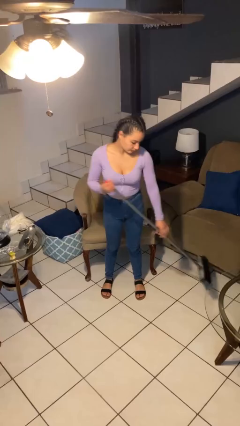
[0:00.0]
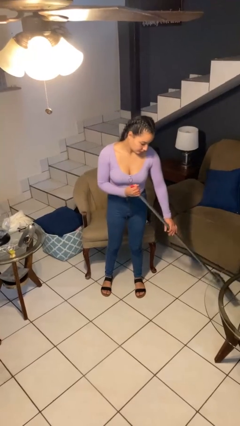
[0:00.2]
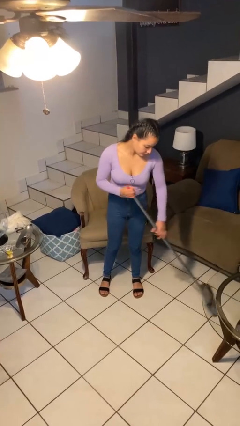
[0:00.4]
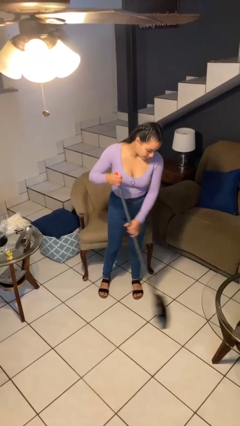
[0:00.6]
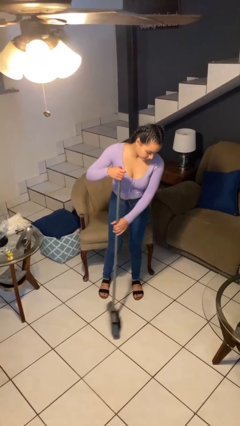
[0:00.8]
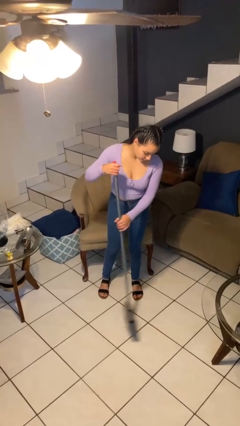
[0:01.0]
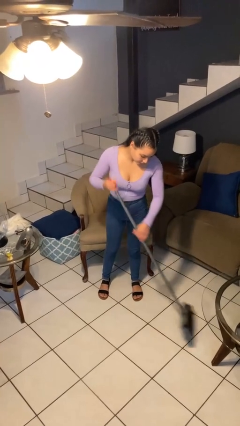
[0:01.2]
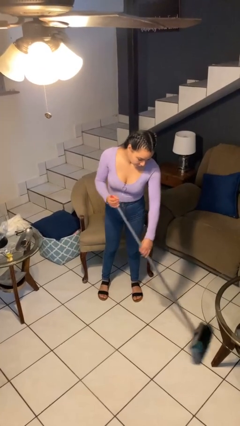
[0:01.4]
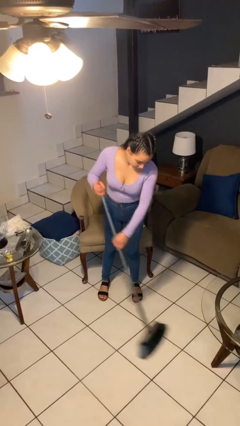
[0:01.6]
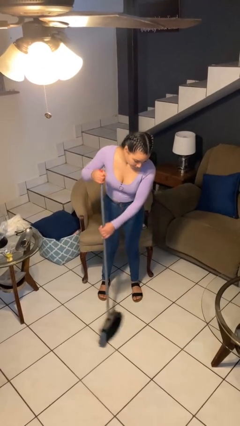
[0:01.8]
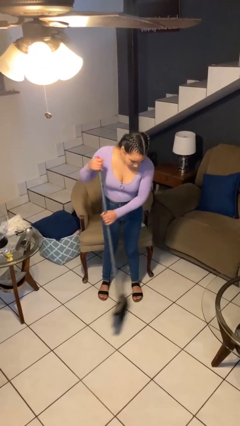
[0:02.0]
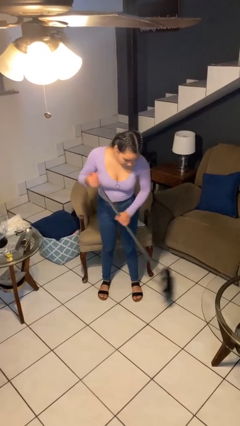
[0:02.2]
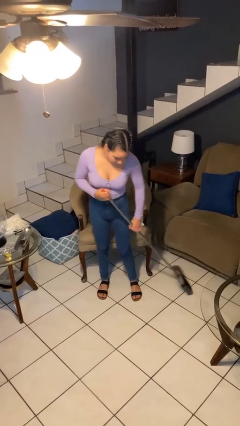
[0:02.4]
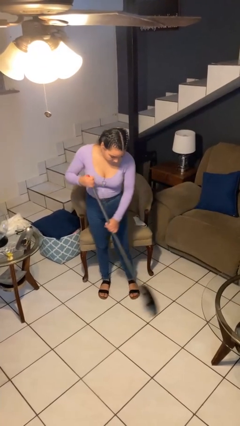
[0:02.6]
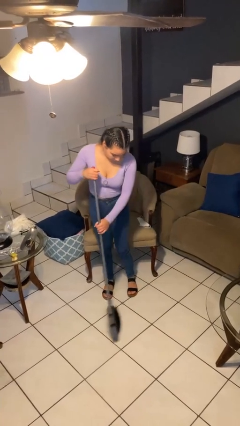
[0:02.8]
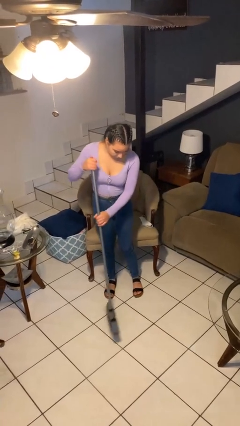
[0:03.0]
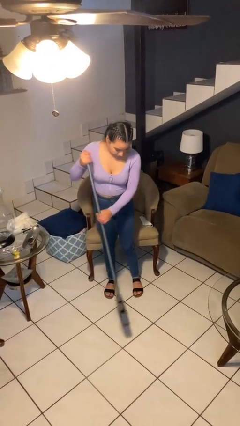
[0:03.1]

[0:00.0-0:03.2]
person sweeps floor

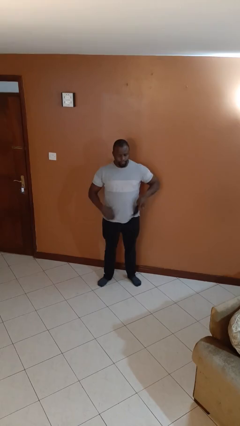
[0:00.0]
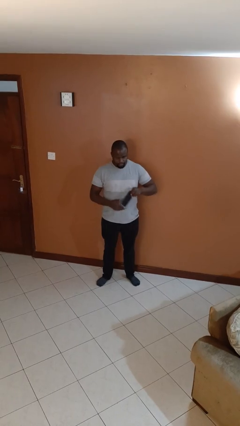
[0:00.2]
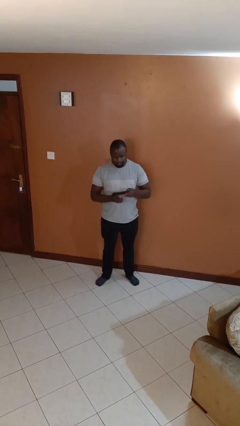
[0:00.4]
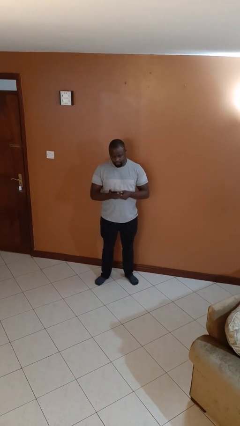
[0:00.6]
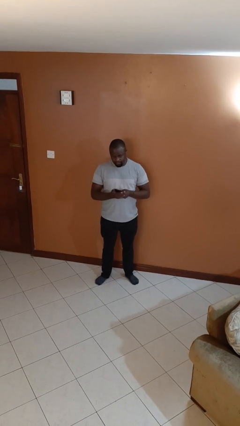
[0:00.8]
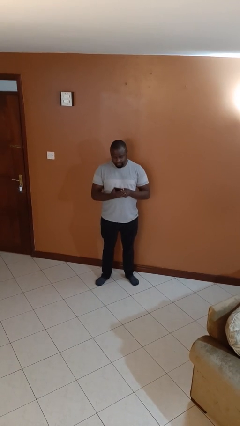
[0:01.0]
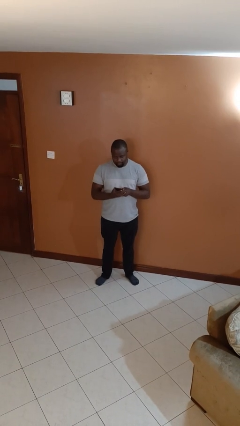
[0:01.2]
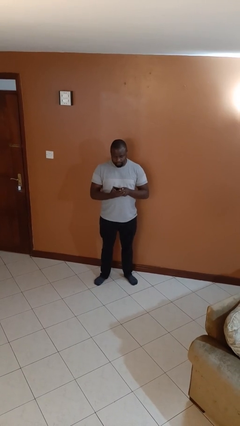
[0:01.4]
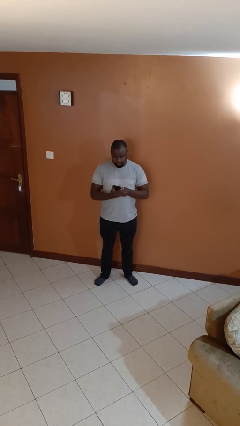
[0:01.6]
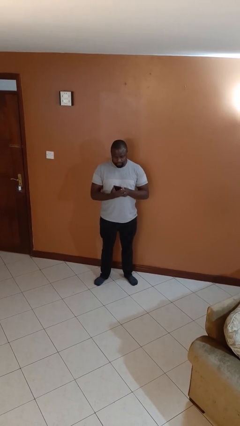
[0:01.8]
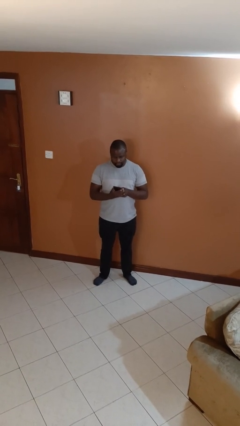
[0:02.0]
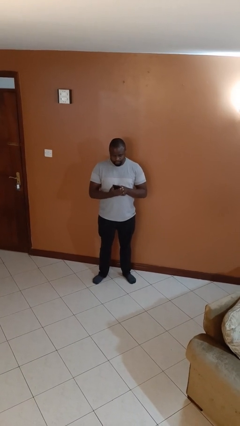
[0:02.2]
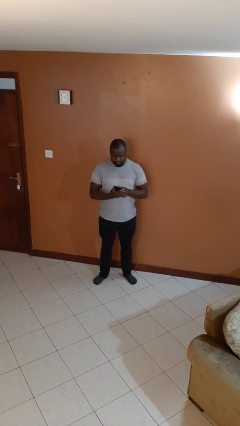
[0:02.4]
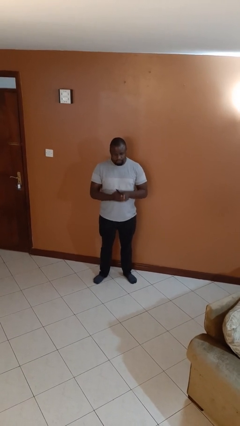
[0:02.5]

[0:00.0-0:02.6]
person takes phone from pocket

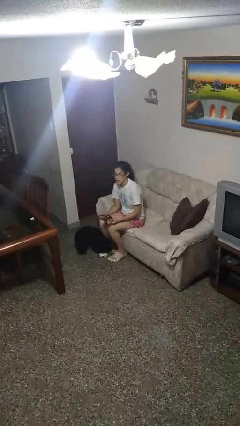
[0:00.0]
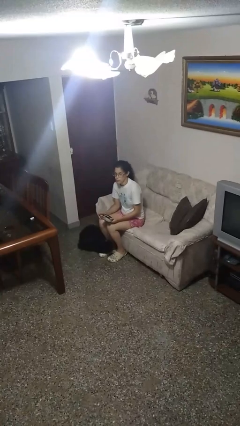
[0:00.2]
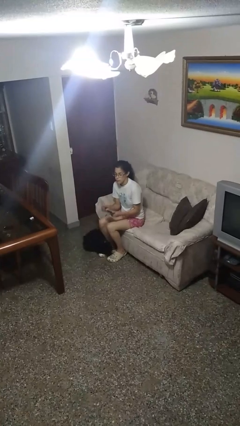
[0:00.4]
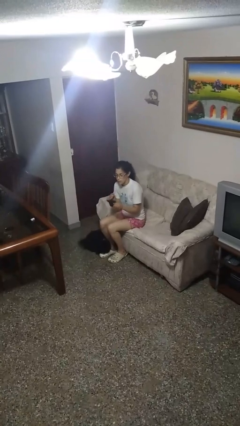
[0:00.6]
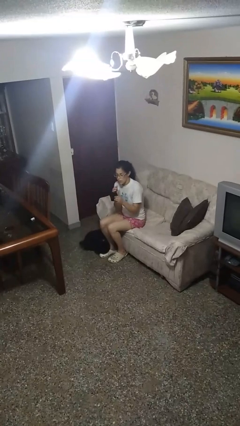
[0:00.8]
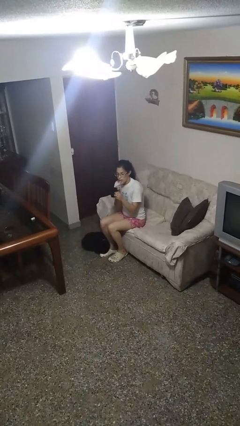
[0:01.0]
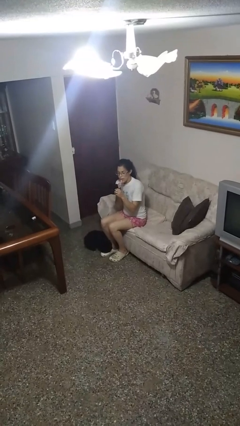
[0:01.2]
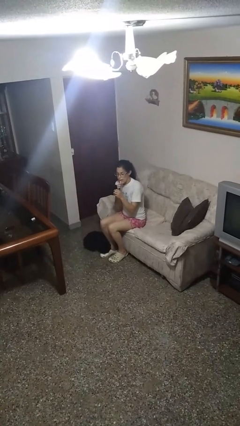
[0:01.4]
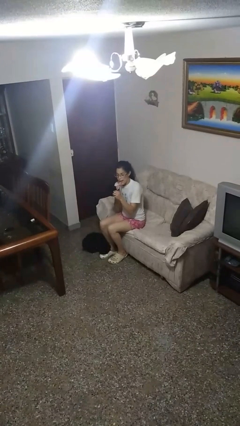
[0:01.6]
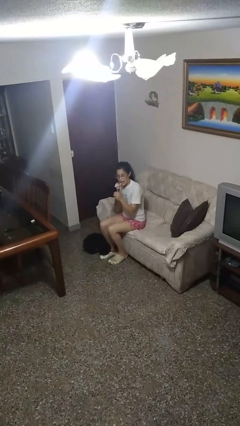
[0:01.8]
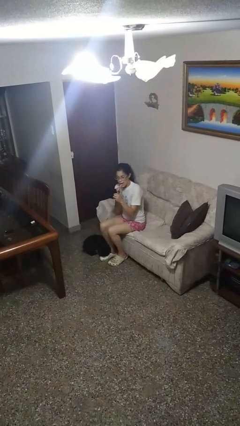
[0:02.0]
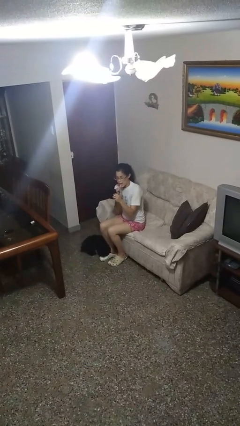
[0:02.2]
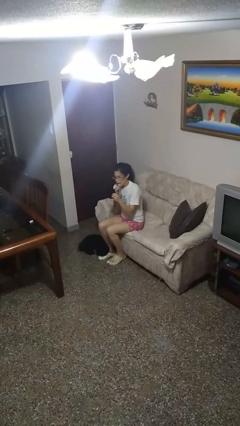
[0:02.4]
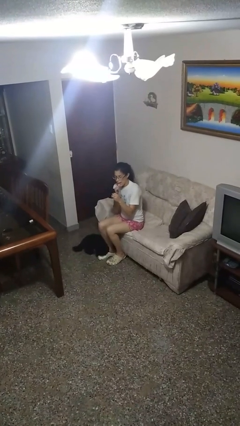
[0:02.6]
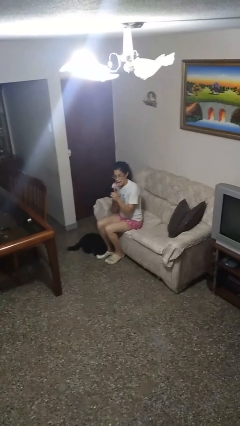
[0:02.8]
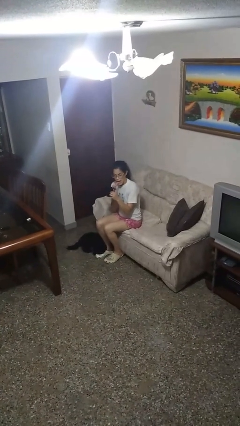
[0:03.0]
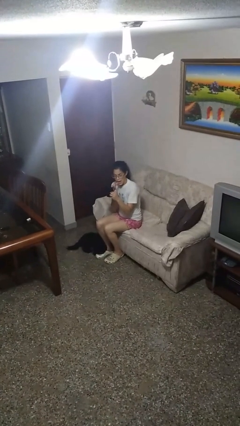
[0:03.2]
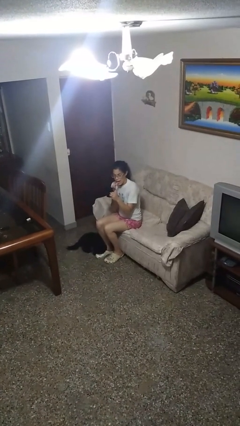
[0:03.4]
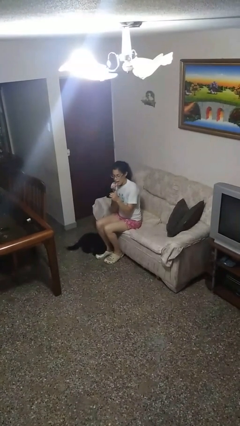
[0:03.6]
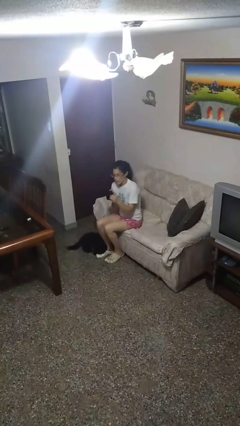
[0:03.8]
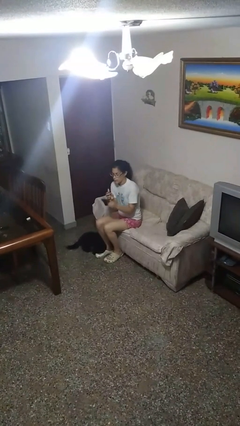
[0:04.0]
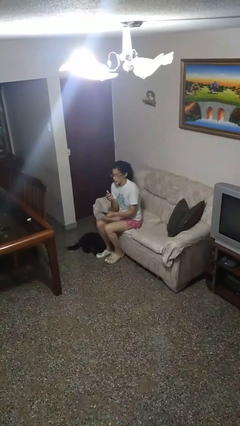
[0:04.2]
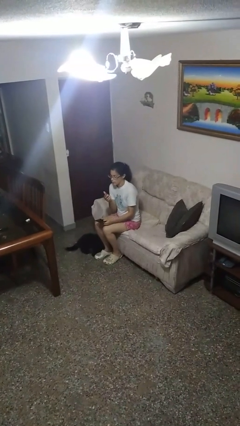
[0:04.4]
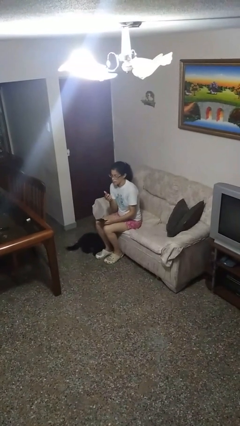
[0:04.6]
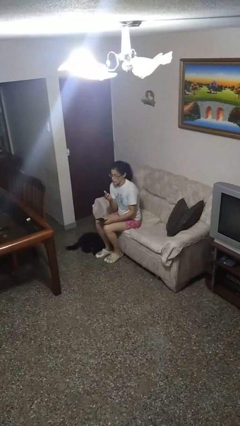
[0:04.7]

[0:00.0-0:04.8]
person applies lip makeup

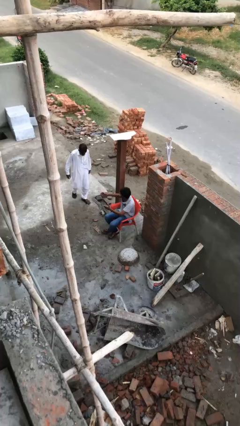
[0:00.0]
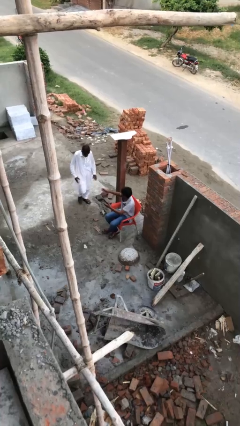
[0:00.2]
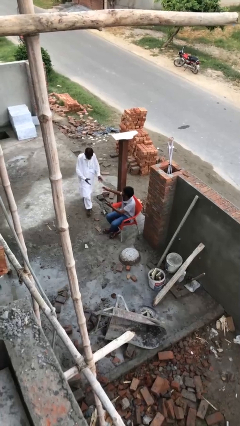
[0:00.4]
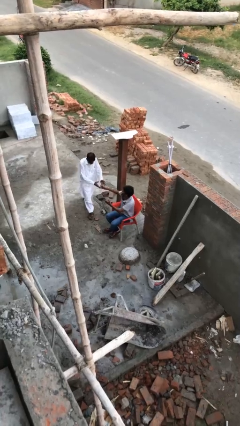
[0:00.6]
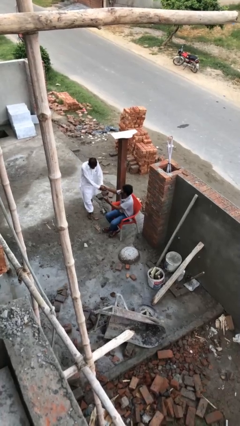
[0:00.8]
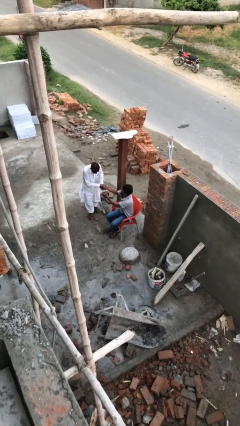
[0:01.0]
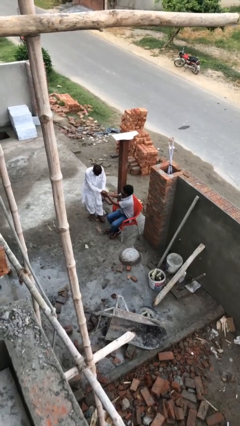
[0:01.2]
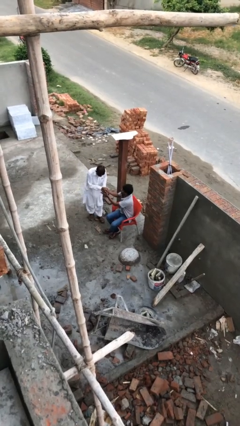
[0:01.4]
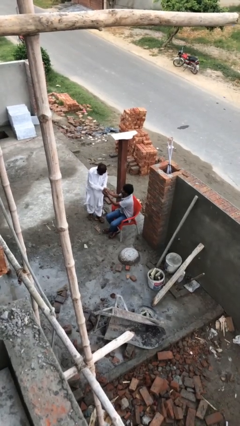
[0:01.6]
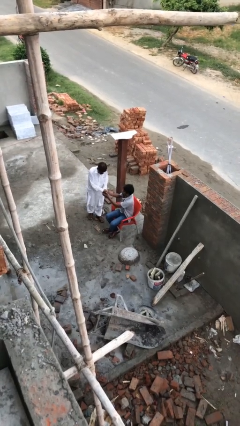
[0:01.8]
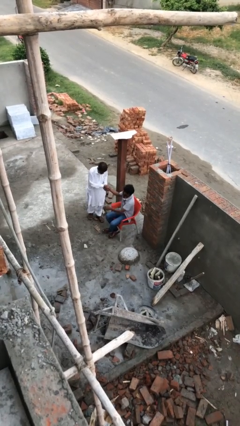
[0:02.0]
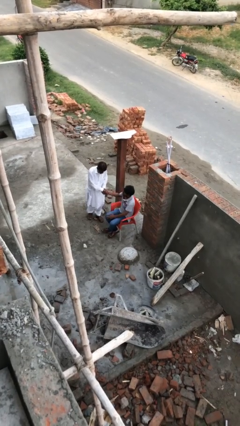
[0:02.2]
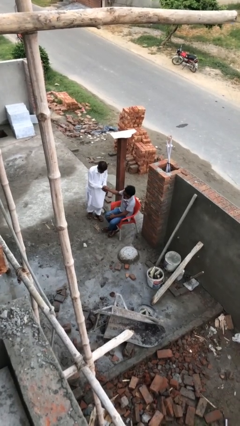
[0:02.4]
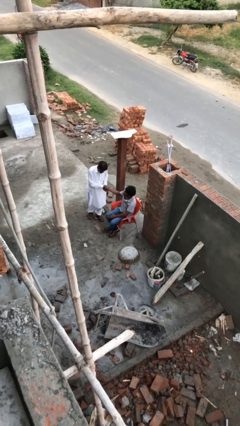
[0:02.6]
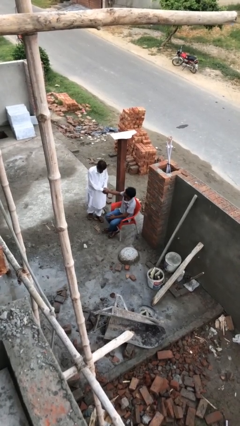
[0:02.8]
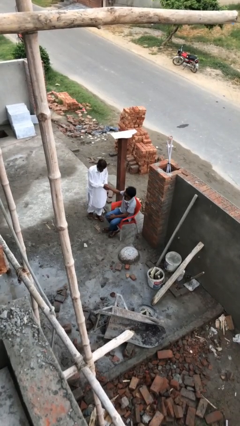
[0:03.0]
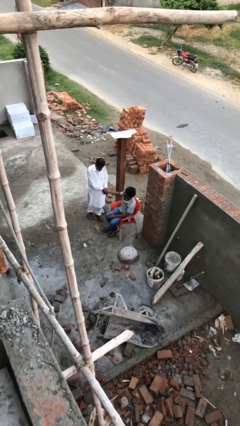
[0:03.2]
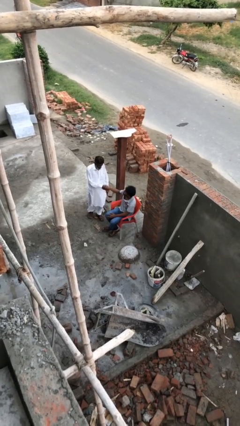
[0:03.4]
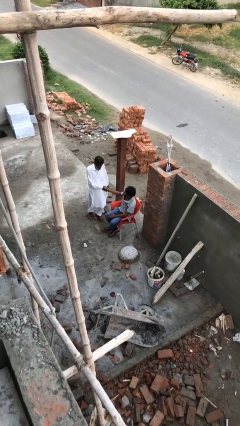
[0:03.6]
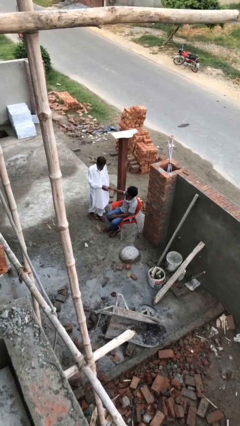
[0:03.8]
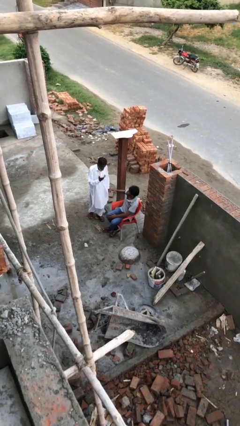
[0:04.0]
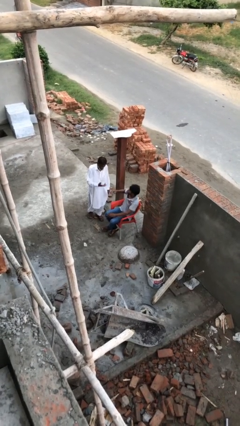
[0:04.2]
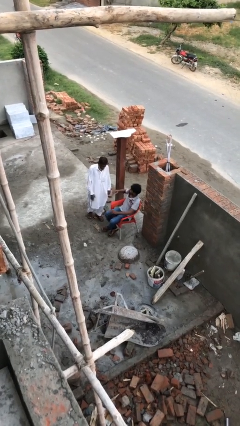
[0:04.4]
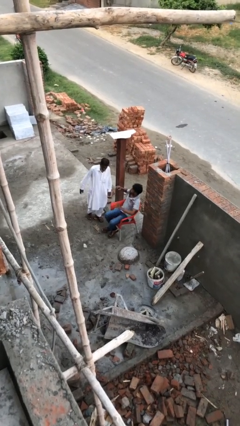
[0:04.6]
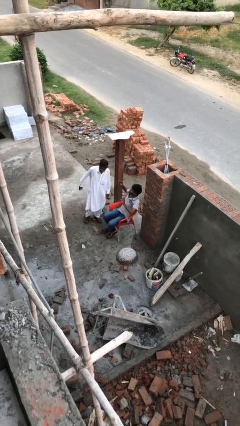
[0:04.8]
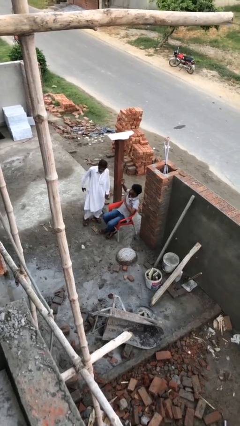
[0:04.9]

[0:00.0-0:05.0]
person shakes hand

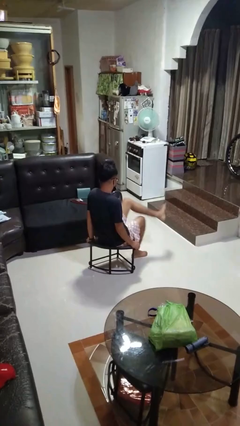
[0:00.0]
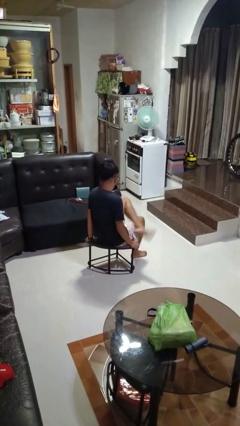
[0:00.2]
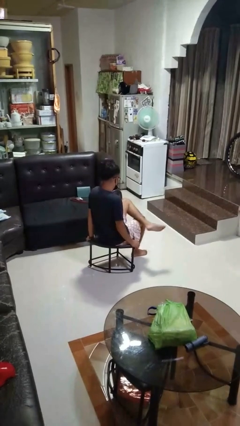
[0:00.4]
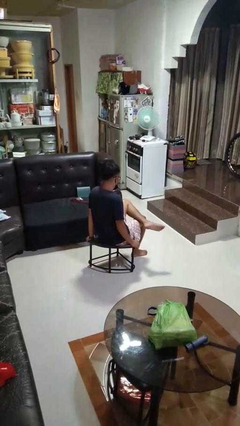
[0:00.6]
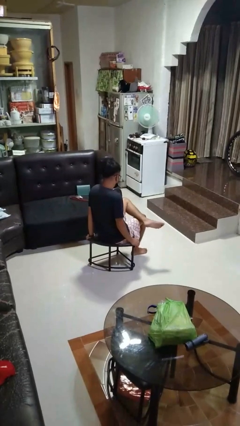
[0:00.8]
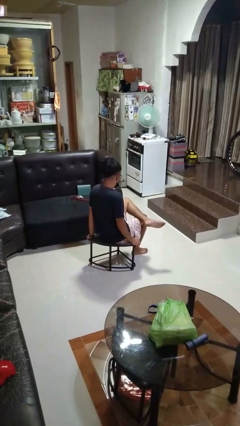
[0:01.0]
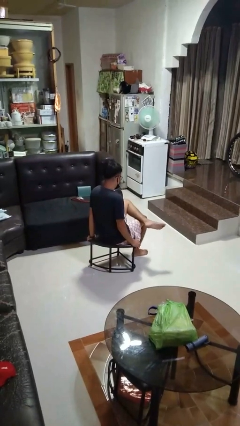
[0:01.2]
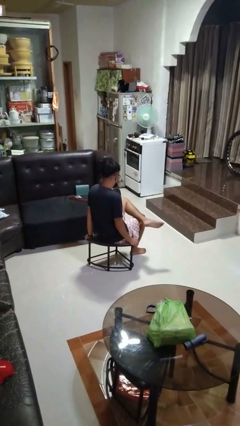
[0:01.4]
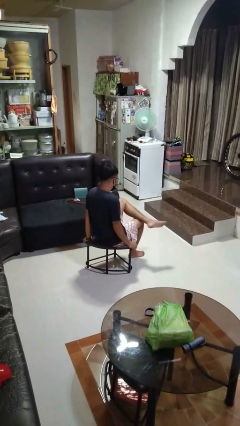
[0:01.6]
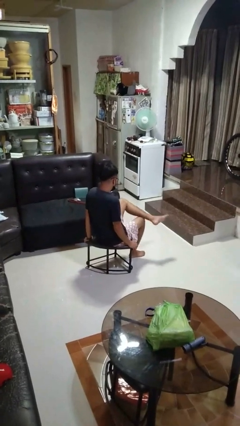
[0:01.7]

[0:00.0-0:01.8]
person crosses legs

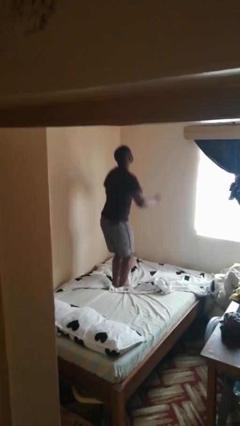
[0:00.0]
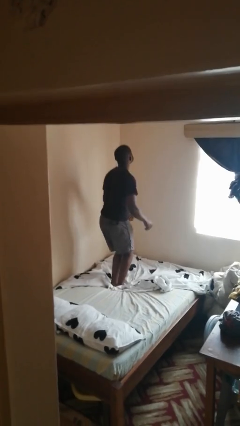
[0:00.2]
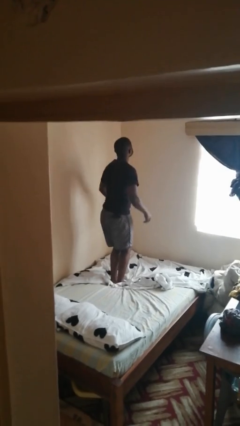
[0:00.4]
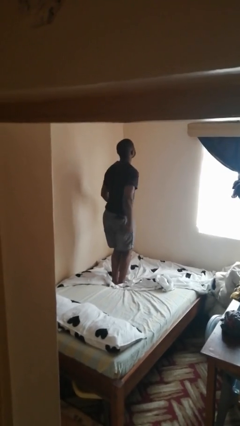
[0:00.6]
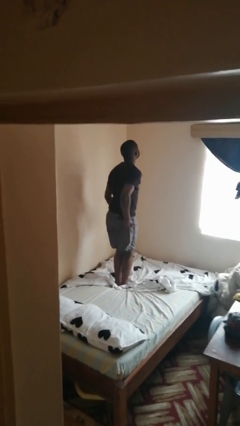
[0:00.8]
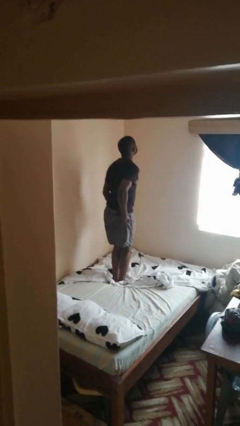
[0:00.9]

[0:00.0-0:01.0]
person jumps on bed
